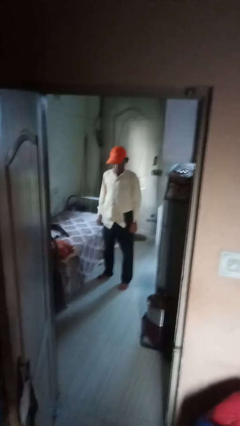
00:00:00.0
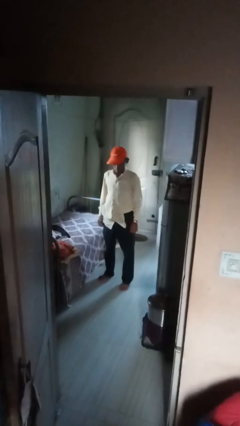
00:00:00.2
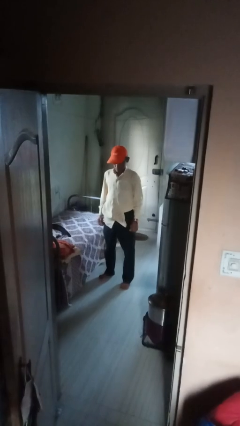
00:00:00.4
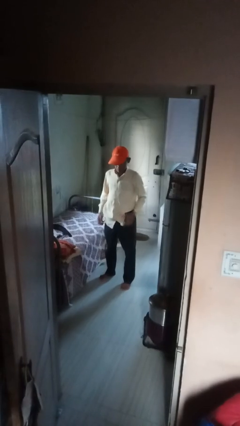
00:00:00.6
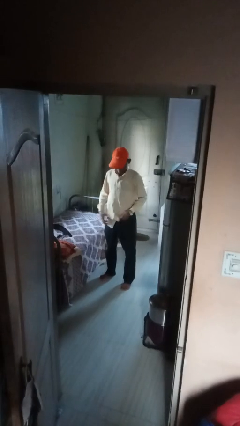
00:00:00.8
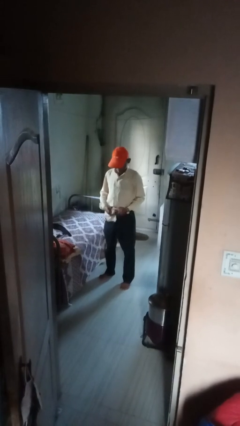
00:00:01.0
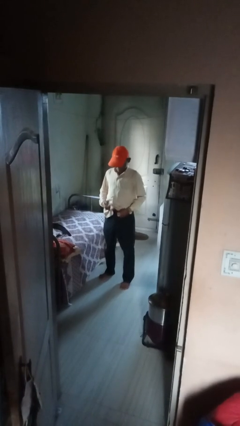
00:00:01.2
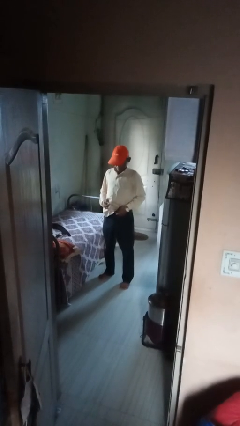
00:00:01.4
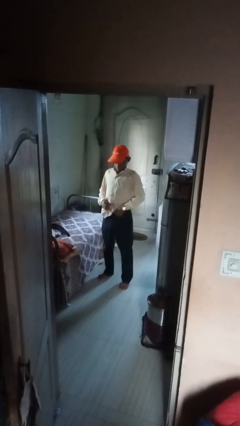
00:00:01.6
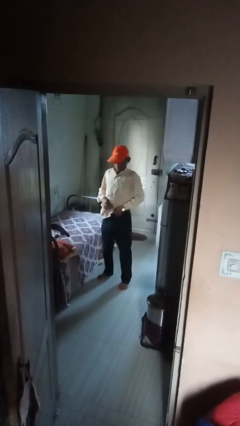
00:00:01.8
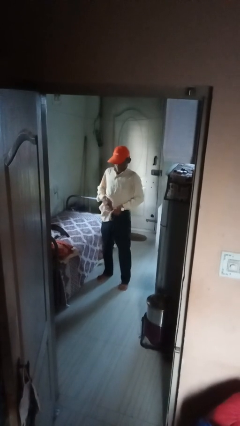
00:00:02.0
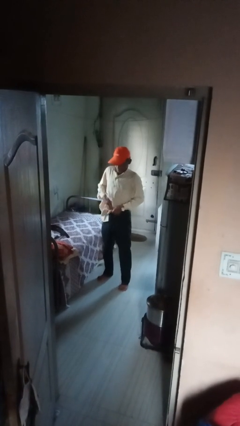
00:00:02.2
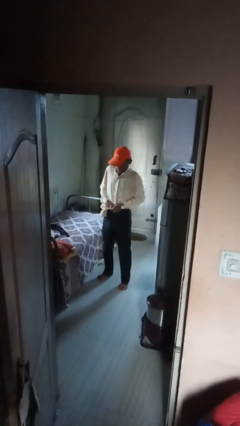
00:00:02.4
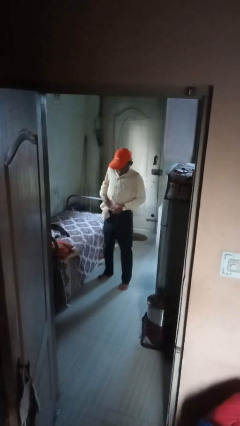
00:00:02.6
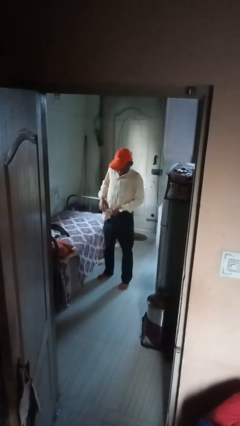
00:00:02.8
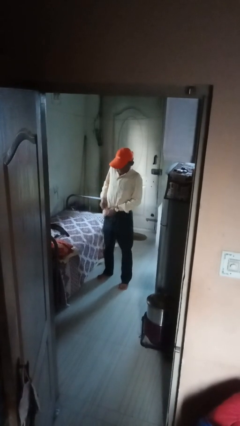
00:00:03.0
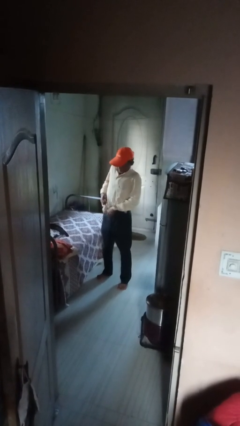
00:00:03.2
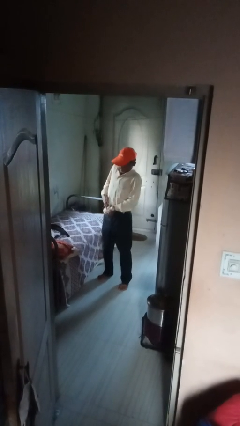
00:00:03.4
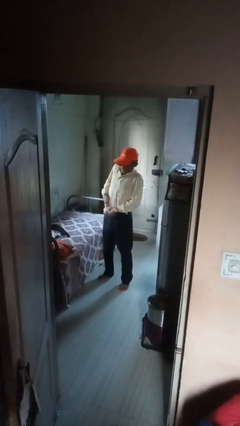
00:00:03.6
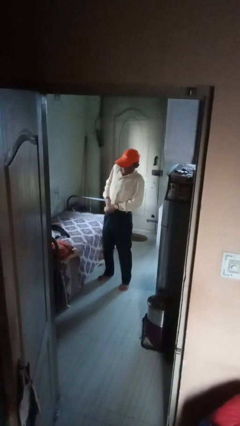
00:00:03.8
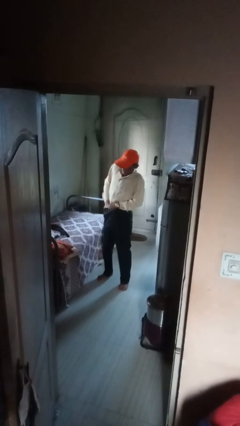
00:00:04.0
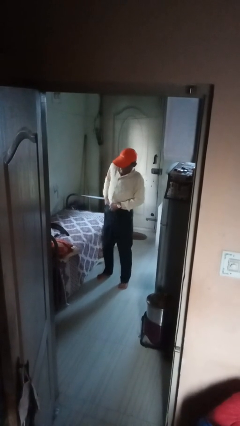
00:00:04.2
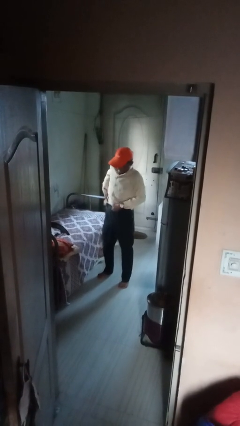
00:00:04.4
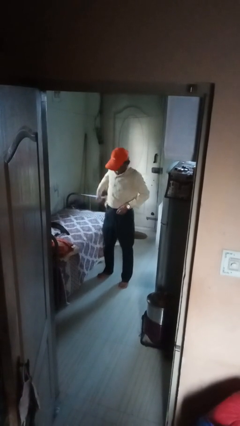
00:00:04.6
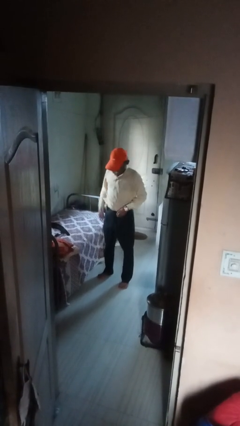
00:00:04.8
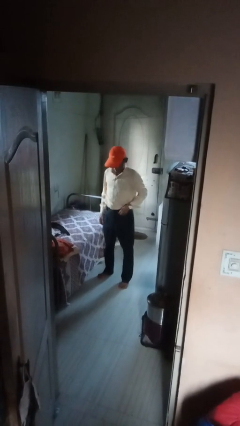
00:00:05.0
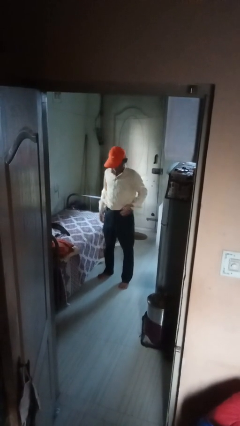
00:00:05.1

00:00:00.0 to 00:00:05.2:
person tucks in shirt

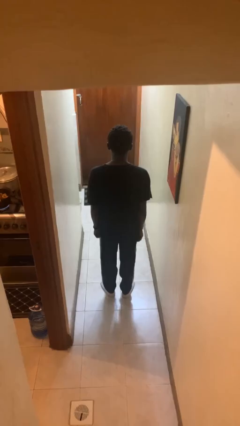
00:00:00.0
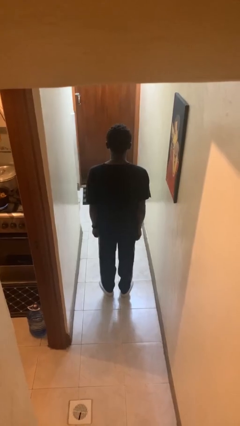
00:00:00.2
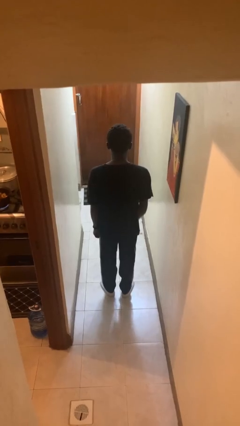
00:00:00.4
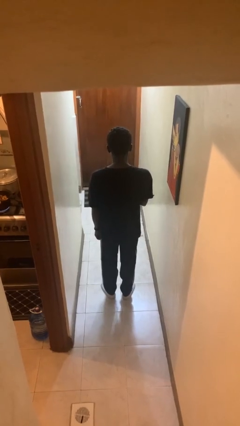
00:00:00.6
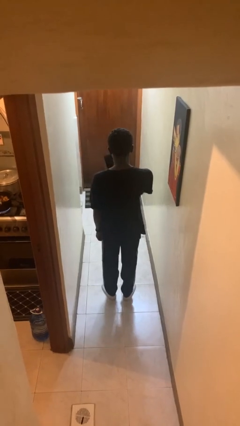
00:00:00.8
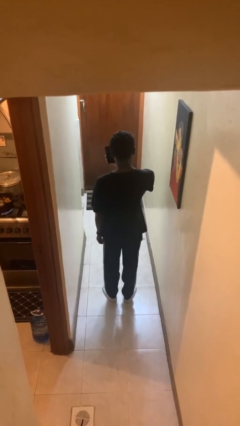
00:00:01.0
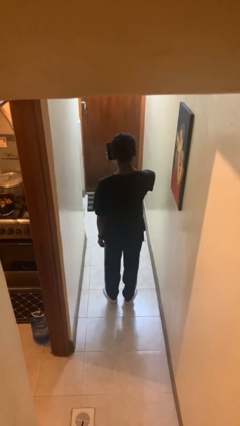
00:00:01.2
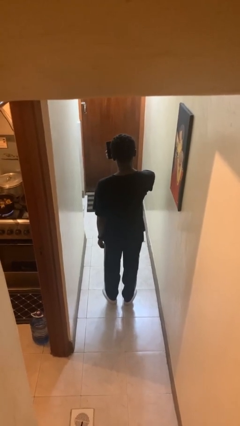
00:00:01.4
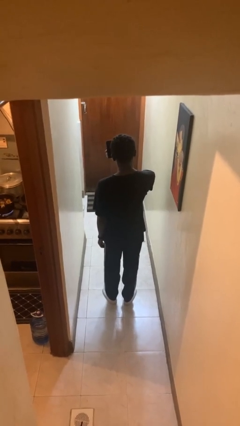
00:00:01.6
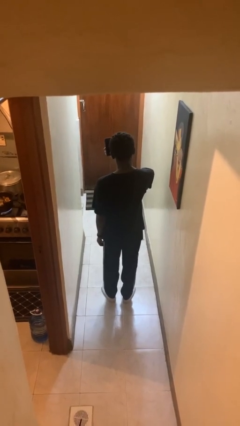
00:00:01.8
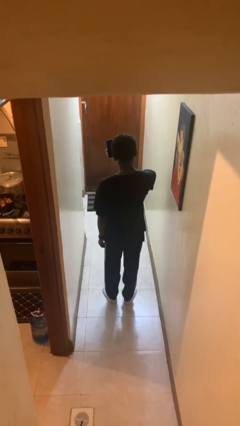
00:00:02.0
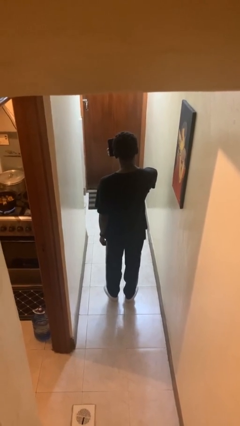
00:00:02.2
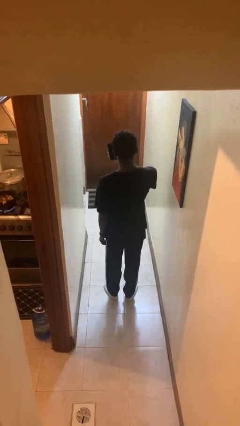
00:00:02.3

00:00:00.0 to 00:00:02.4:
person takes selfie

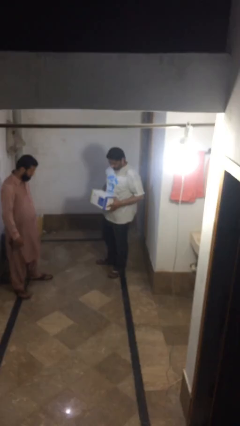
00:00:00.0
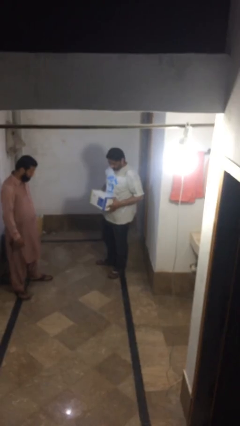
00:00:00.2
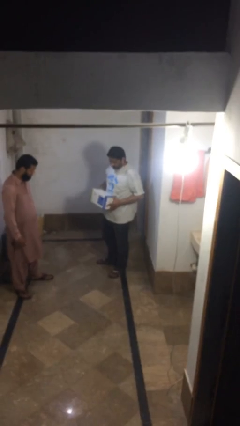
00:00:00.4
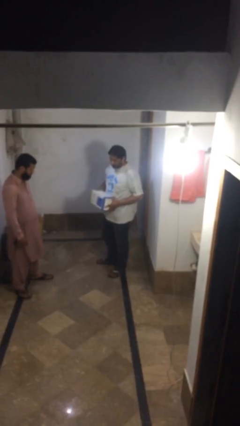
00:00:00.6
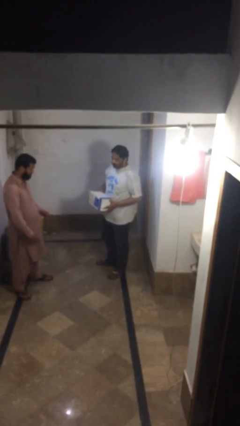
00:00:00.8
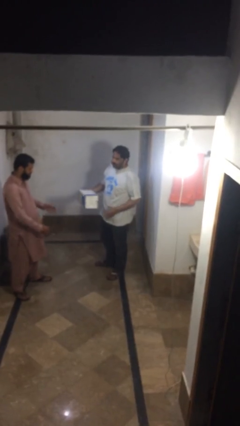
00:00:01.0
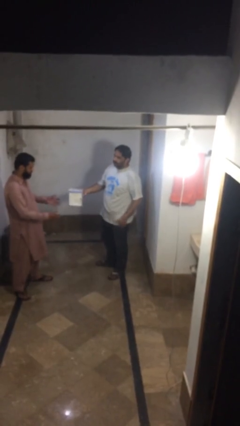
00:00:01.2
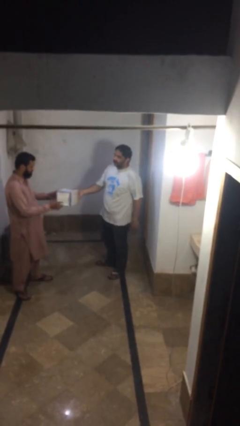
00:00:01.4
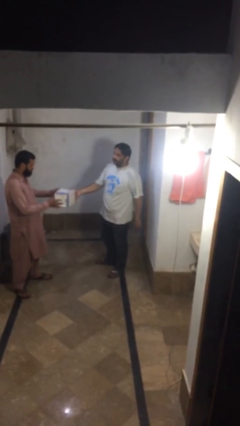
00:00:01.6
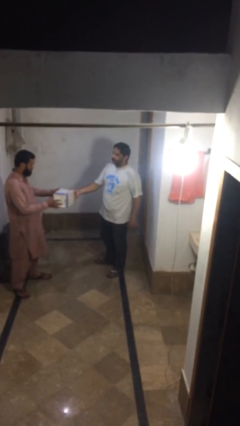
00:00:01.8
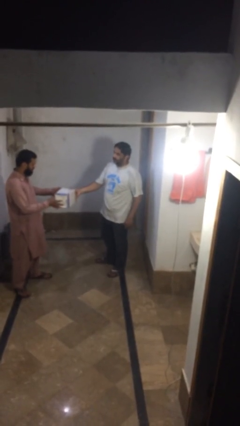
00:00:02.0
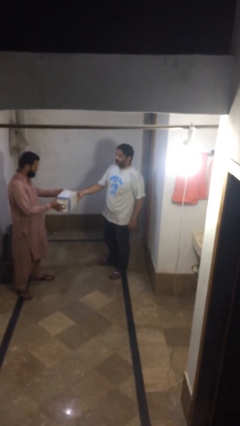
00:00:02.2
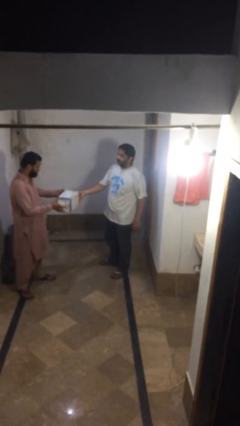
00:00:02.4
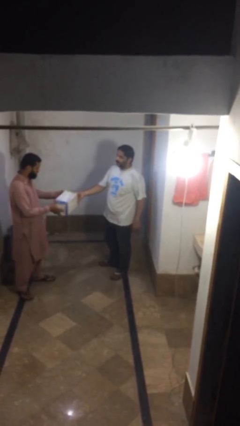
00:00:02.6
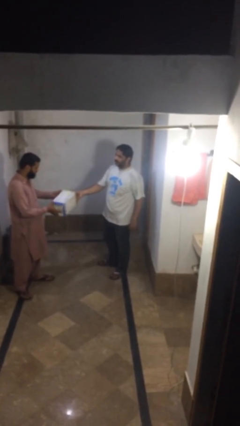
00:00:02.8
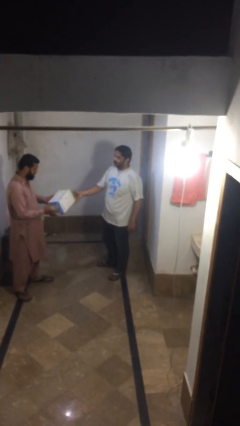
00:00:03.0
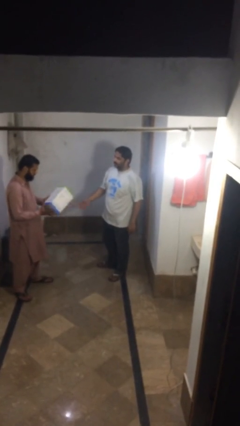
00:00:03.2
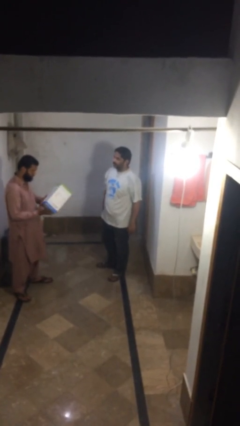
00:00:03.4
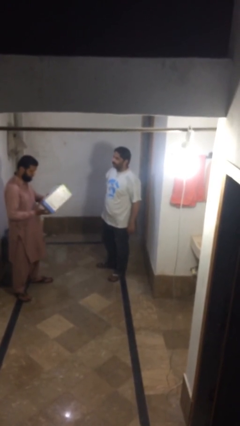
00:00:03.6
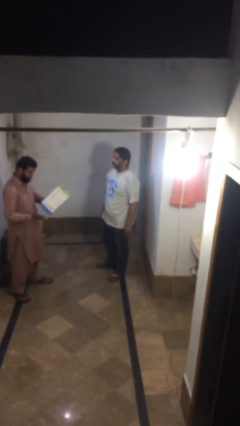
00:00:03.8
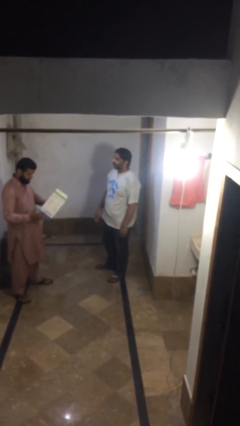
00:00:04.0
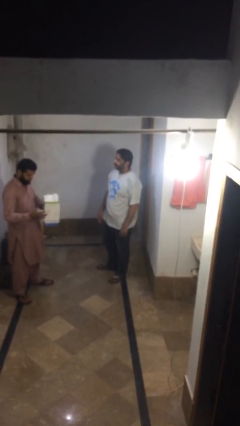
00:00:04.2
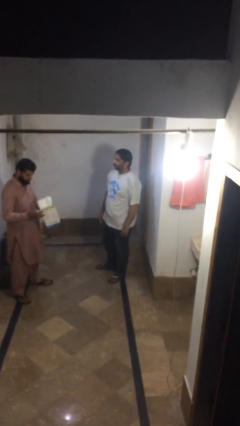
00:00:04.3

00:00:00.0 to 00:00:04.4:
person transfers object to person

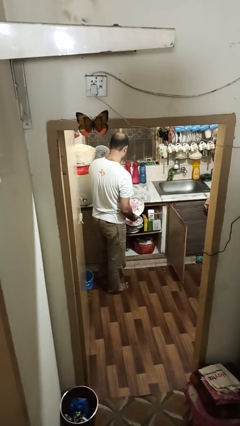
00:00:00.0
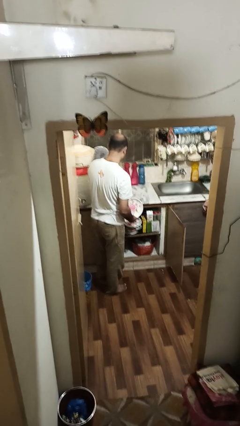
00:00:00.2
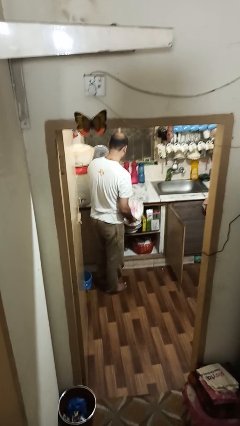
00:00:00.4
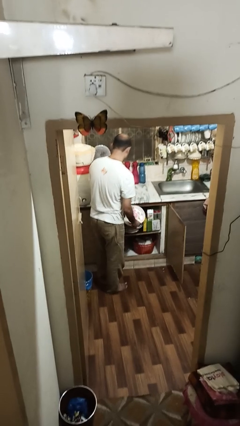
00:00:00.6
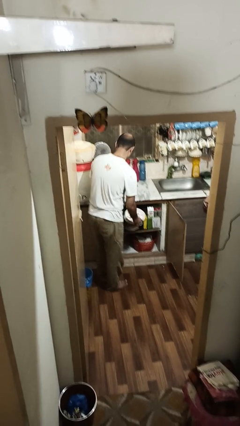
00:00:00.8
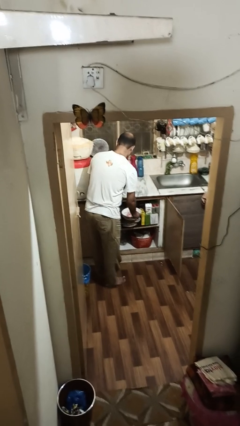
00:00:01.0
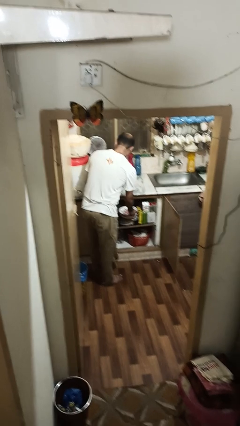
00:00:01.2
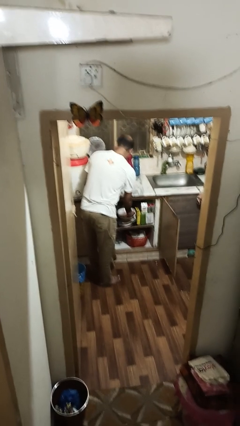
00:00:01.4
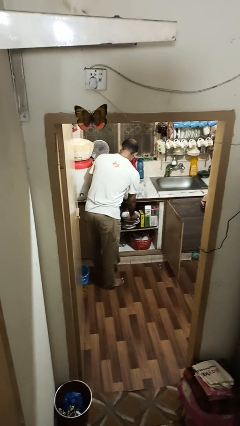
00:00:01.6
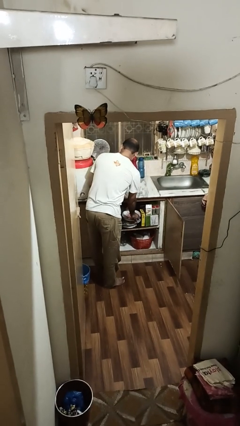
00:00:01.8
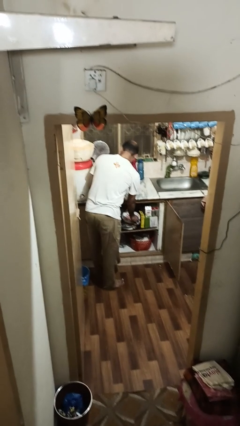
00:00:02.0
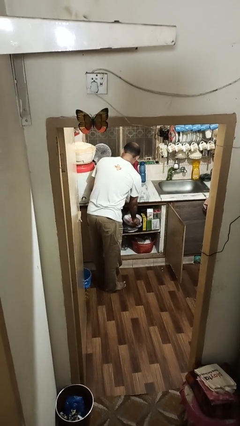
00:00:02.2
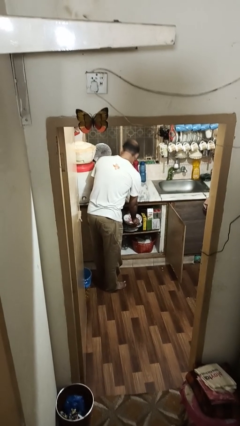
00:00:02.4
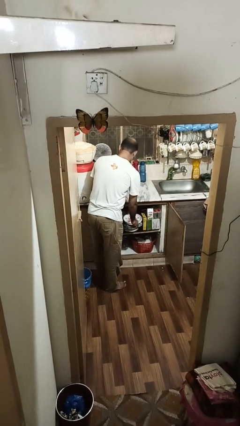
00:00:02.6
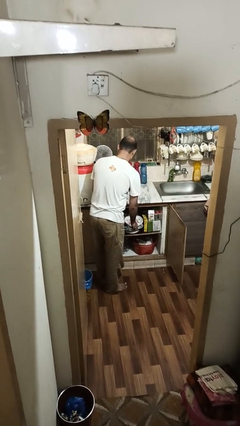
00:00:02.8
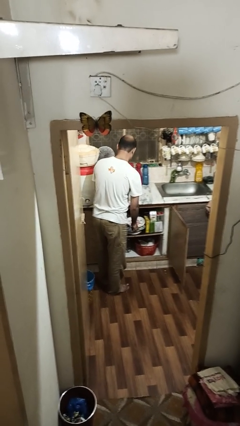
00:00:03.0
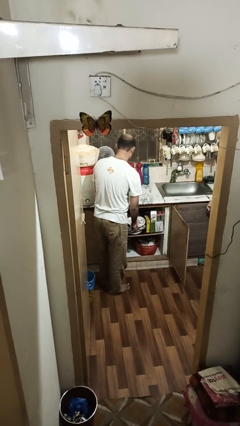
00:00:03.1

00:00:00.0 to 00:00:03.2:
person puts object in cabinet

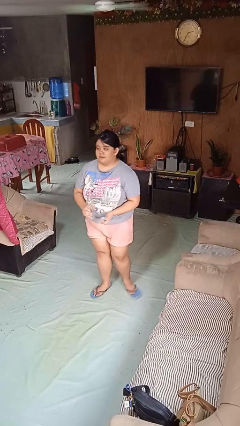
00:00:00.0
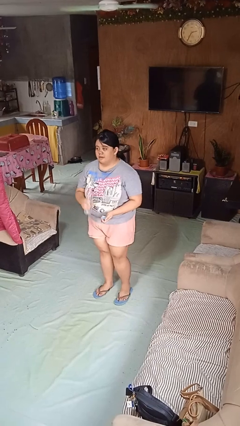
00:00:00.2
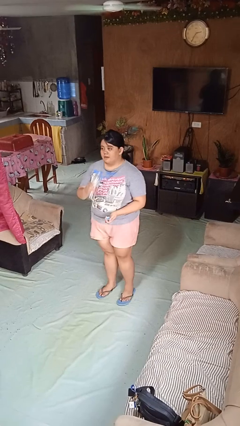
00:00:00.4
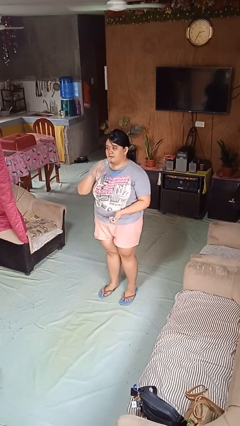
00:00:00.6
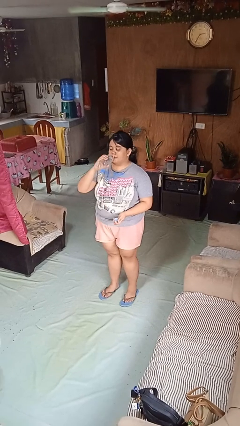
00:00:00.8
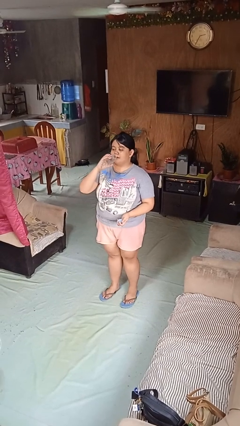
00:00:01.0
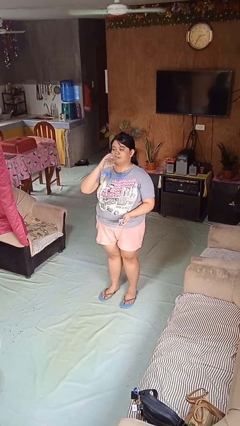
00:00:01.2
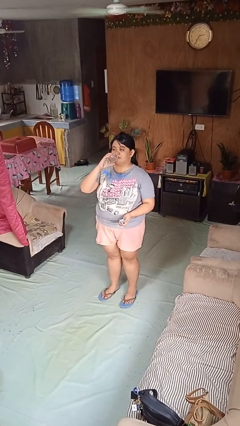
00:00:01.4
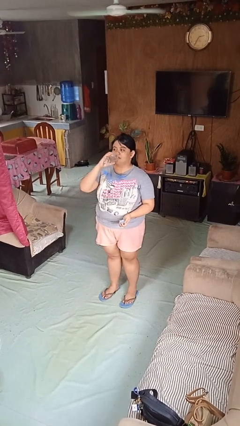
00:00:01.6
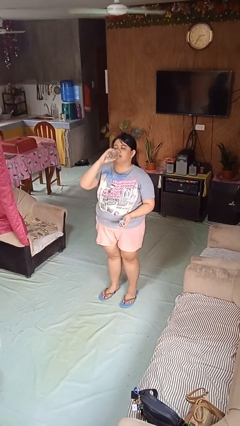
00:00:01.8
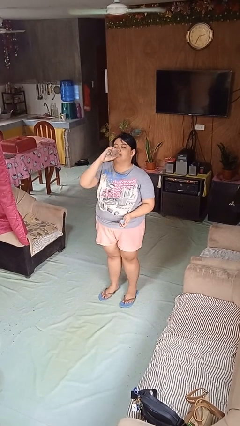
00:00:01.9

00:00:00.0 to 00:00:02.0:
person drinks from bottle

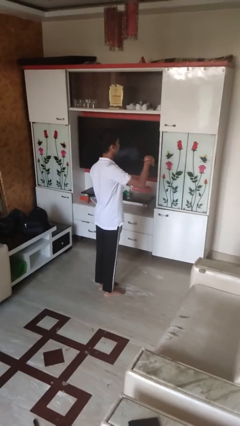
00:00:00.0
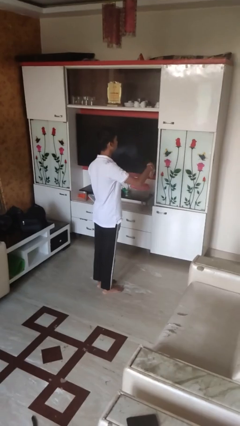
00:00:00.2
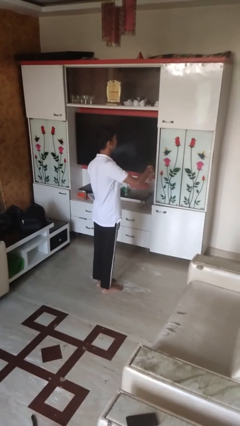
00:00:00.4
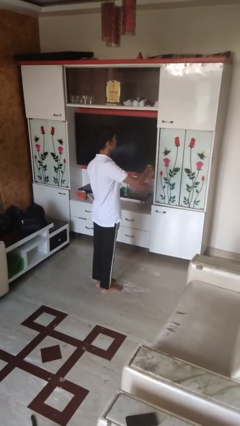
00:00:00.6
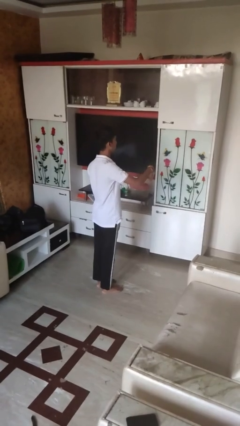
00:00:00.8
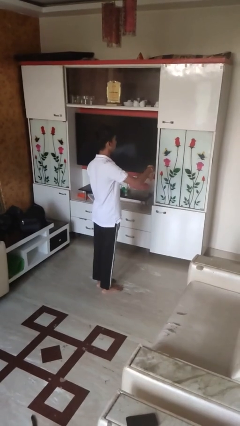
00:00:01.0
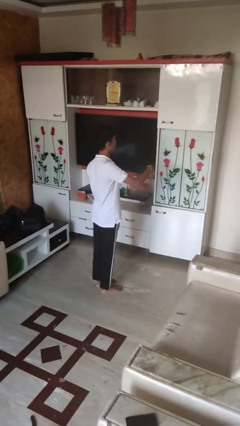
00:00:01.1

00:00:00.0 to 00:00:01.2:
person gestures swipe down
